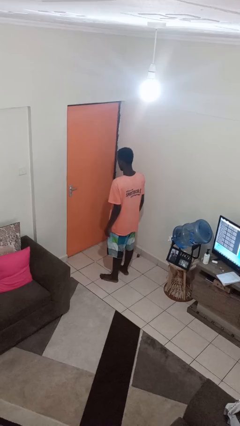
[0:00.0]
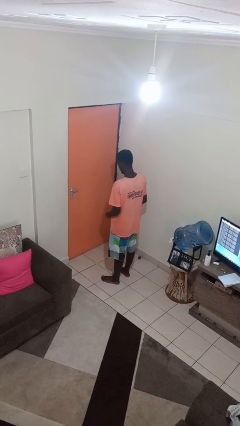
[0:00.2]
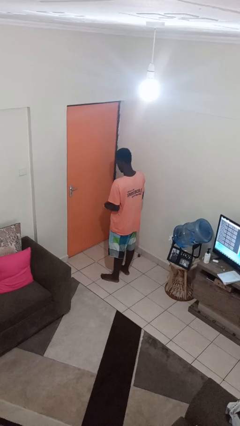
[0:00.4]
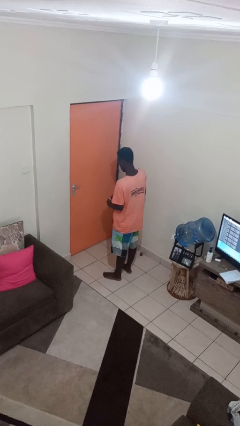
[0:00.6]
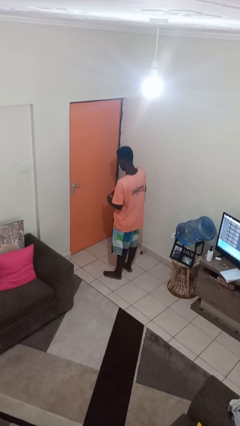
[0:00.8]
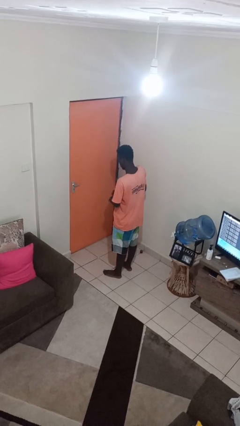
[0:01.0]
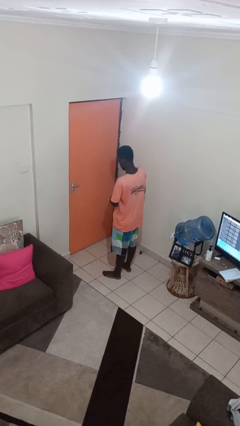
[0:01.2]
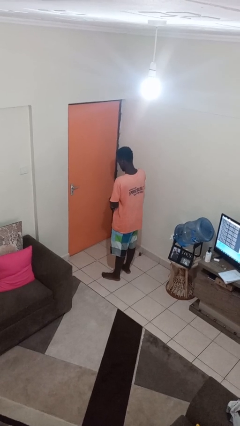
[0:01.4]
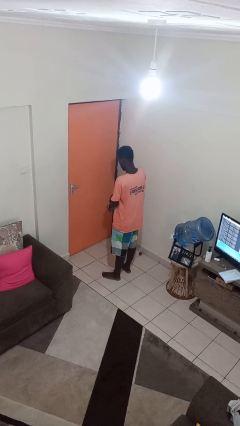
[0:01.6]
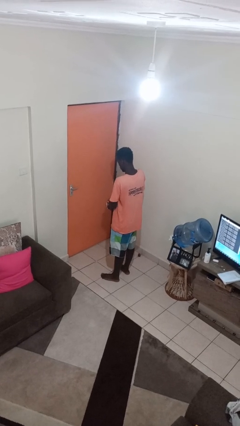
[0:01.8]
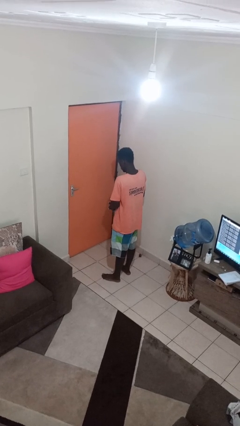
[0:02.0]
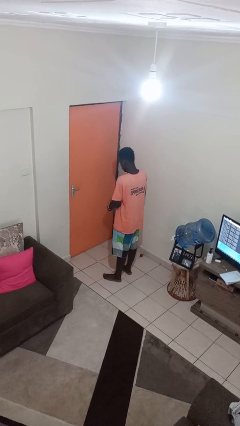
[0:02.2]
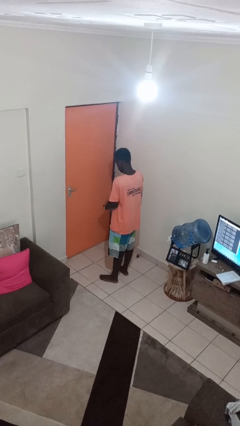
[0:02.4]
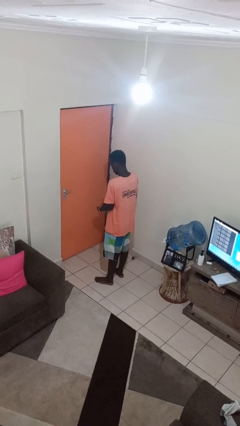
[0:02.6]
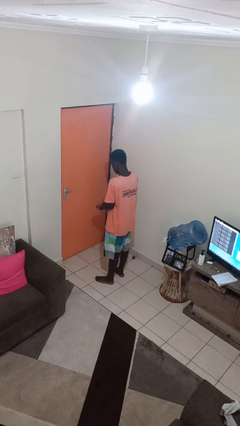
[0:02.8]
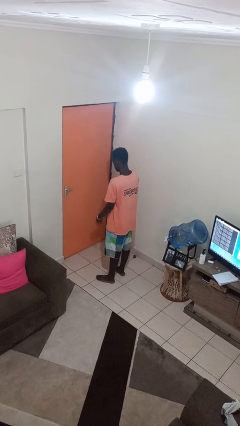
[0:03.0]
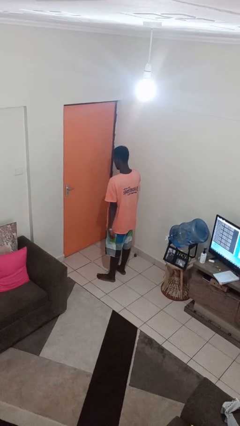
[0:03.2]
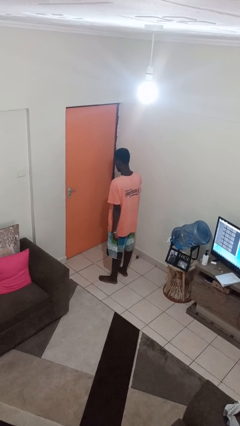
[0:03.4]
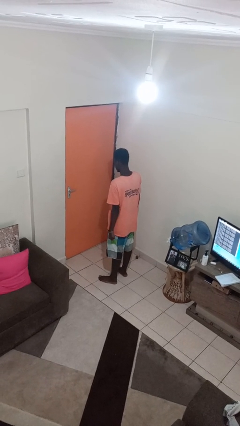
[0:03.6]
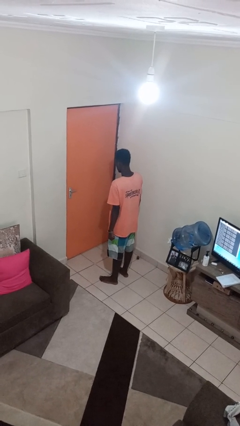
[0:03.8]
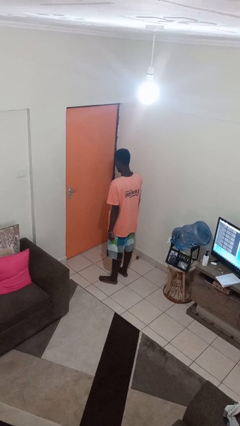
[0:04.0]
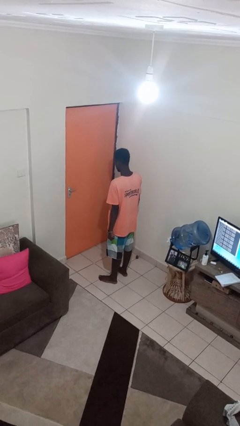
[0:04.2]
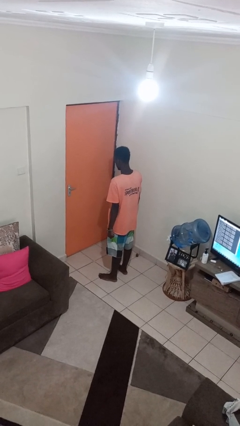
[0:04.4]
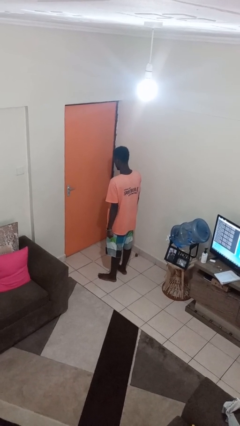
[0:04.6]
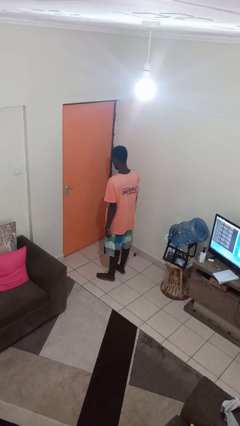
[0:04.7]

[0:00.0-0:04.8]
person puts on wristwatch

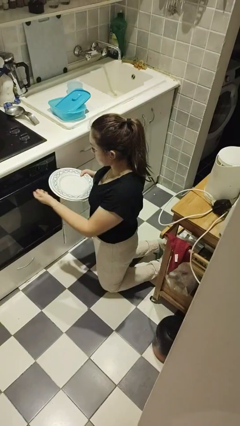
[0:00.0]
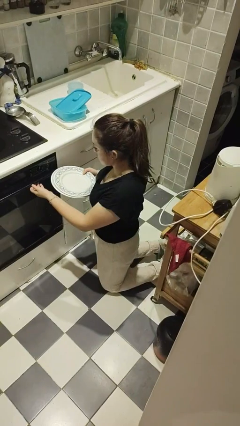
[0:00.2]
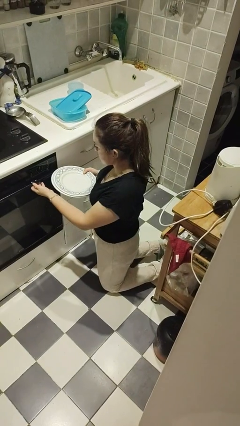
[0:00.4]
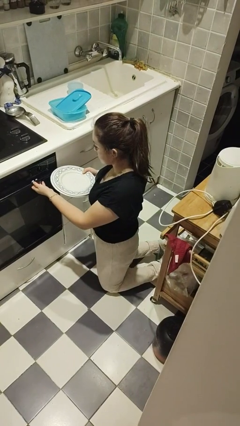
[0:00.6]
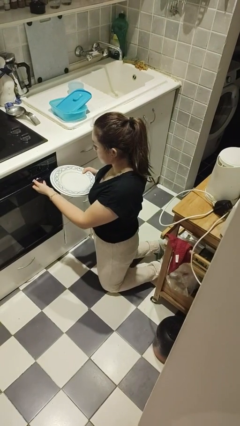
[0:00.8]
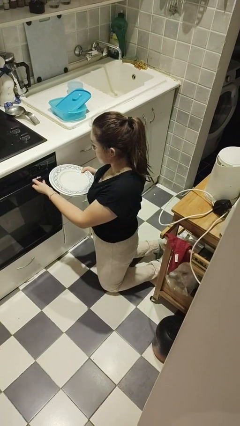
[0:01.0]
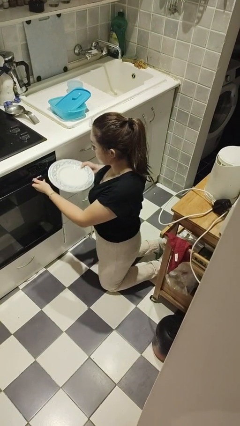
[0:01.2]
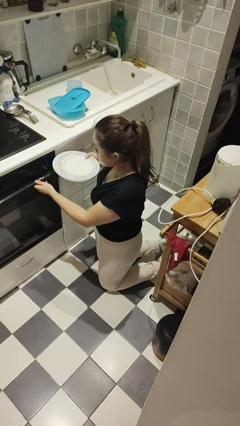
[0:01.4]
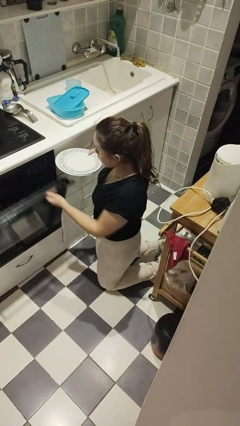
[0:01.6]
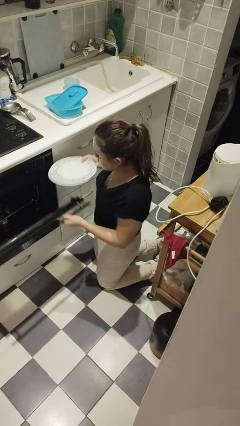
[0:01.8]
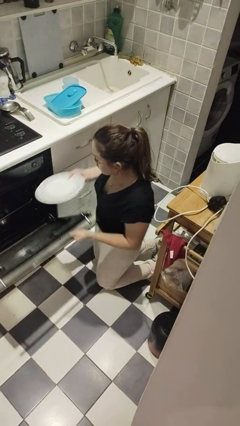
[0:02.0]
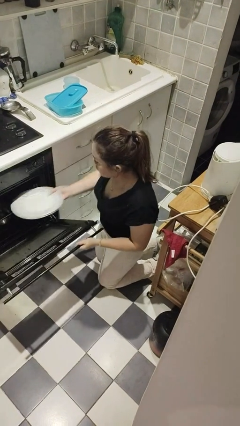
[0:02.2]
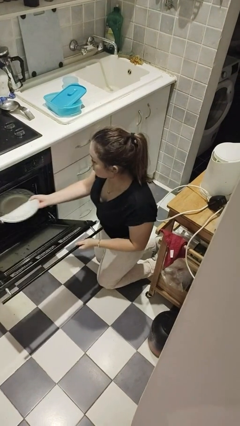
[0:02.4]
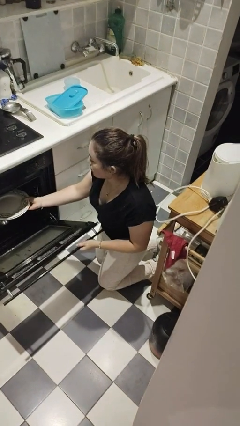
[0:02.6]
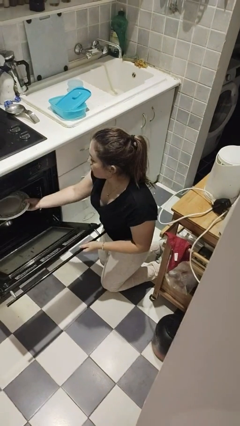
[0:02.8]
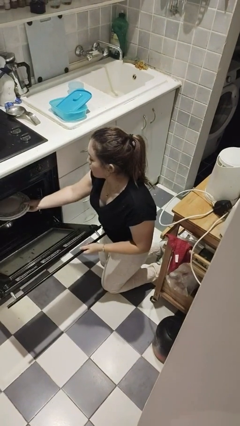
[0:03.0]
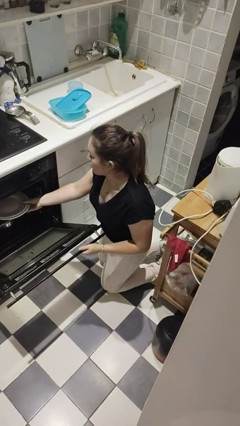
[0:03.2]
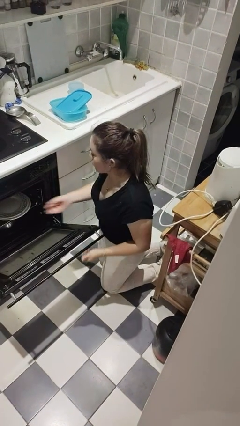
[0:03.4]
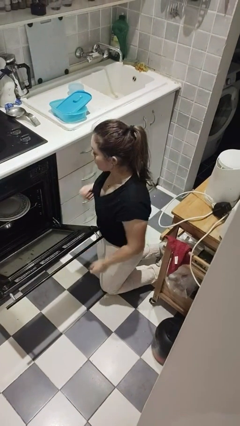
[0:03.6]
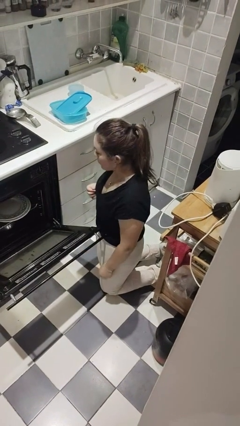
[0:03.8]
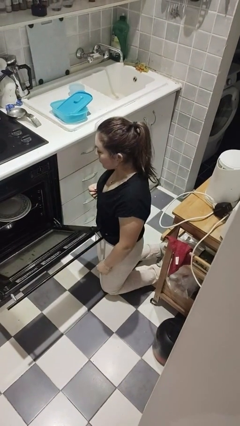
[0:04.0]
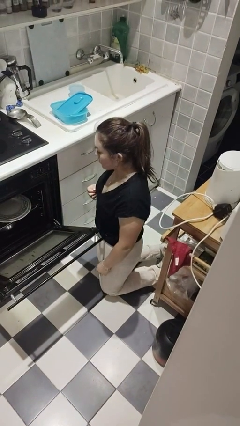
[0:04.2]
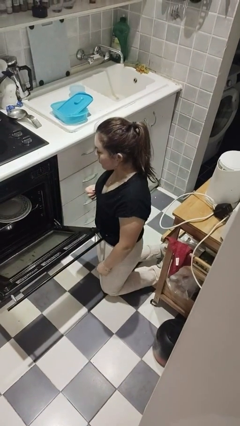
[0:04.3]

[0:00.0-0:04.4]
person loads dishwasher

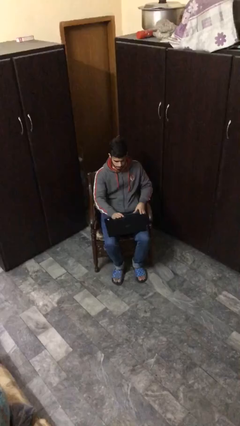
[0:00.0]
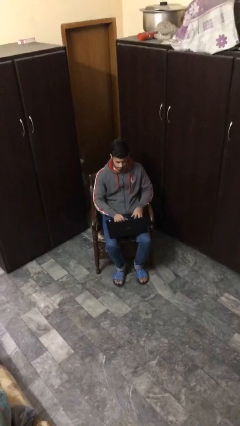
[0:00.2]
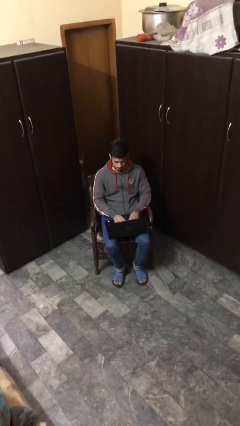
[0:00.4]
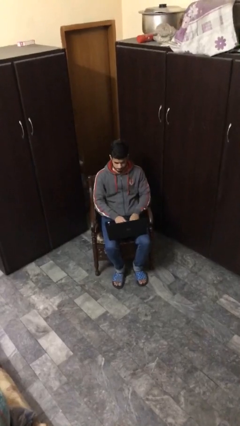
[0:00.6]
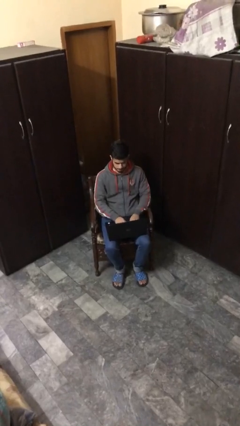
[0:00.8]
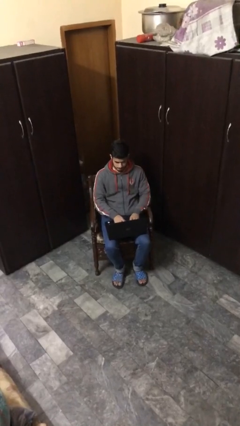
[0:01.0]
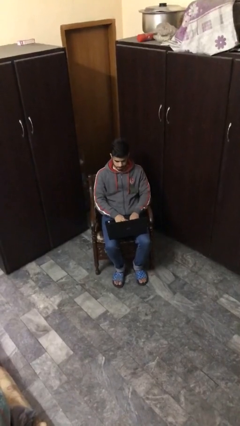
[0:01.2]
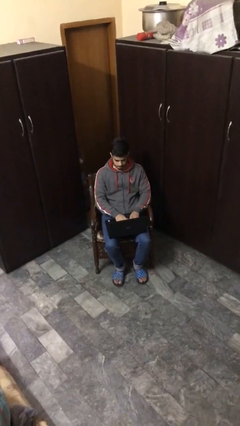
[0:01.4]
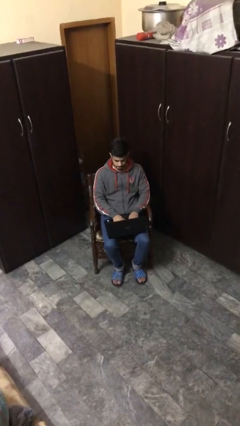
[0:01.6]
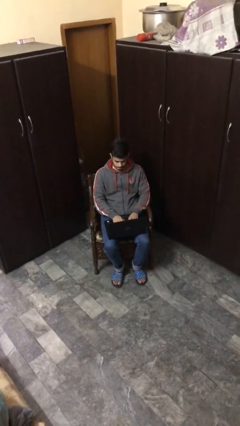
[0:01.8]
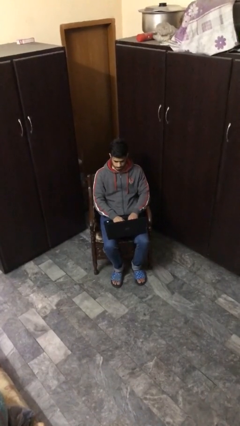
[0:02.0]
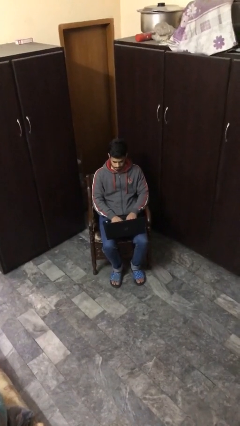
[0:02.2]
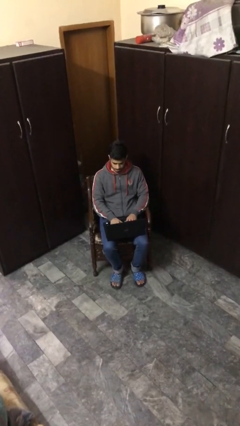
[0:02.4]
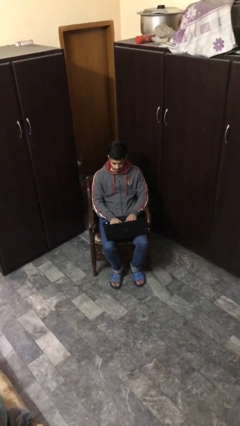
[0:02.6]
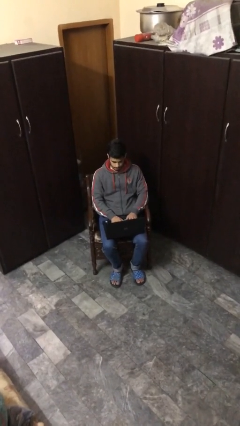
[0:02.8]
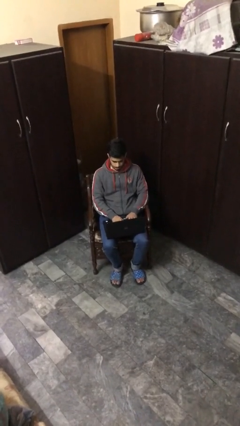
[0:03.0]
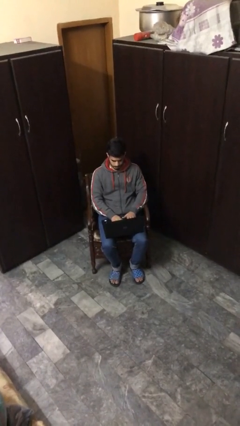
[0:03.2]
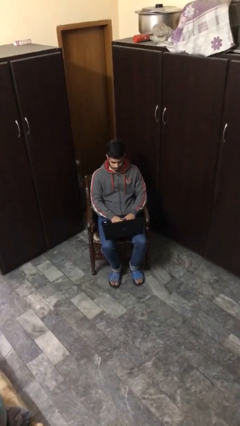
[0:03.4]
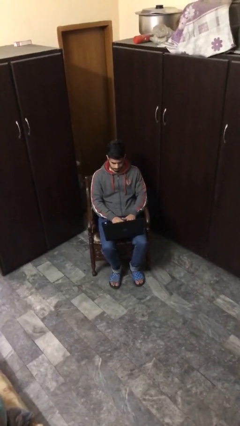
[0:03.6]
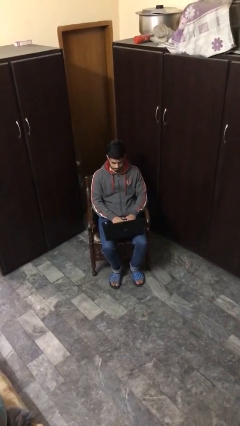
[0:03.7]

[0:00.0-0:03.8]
person interacts with laptop

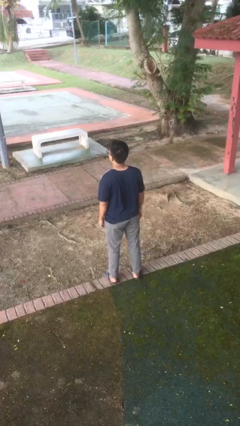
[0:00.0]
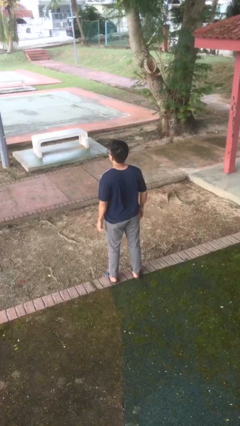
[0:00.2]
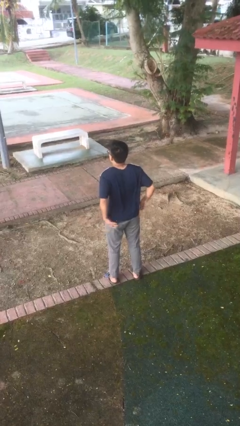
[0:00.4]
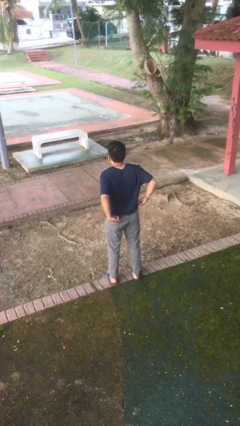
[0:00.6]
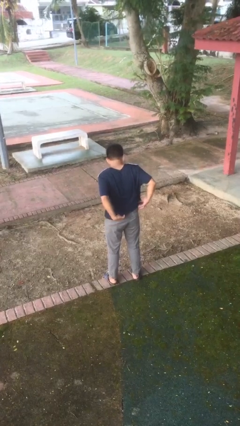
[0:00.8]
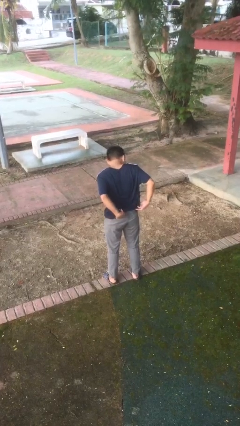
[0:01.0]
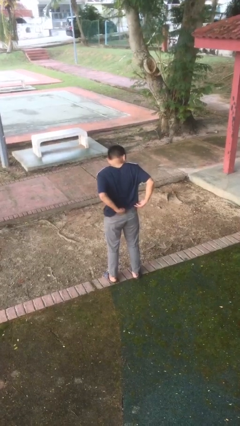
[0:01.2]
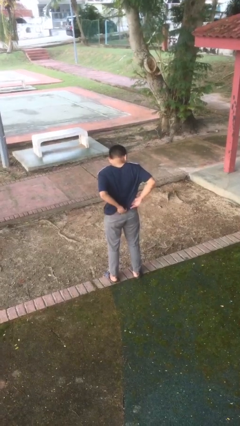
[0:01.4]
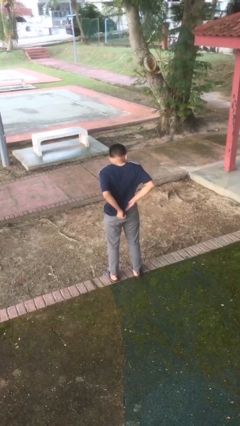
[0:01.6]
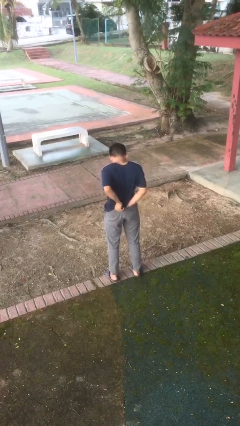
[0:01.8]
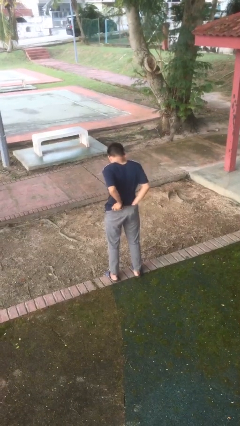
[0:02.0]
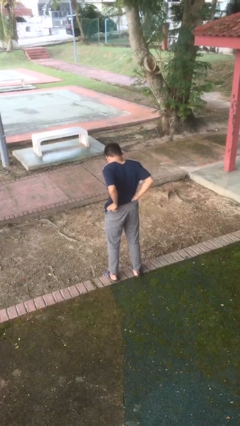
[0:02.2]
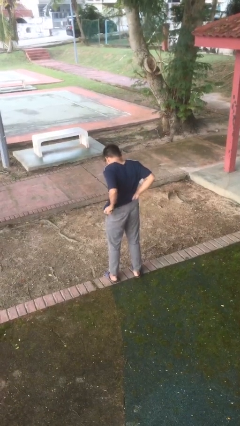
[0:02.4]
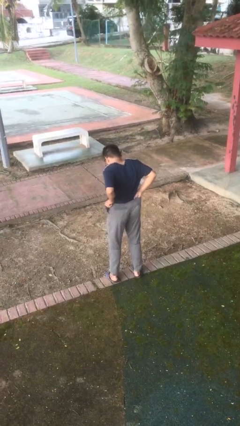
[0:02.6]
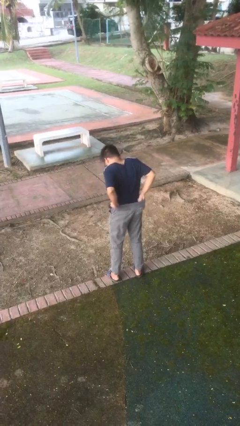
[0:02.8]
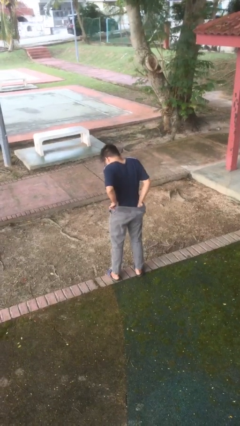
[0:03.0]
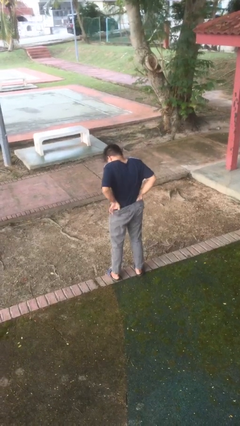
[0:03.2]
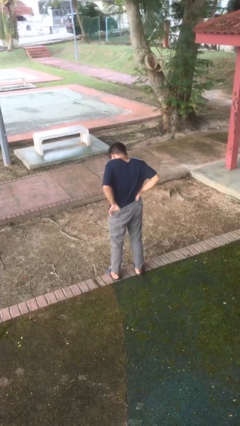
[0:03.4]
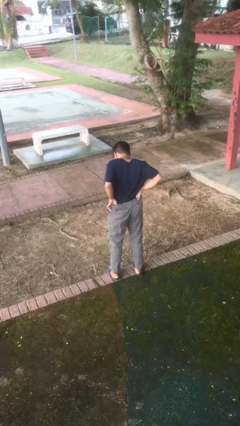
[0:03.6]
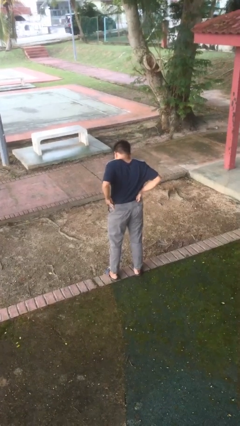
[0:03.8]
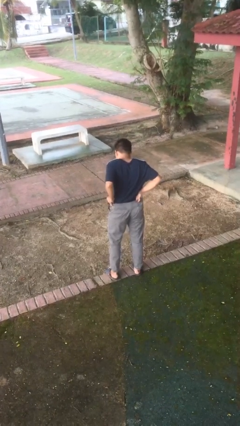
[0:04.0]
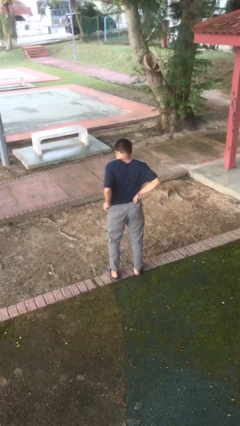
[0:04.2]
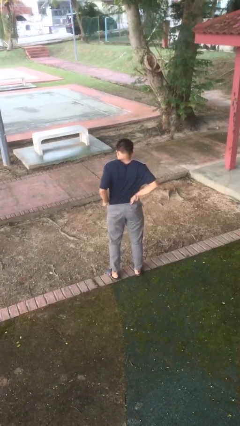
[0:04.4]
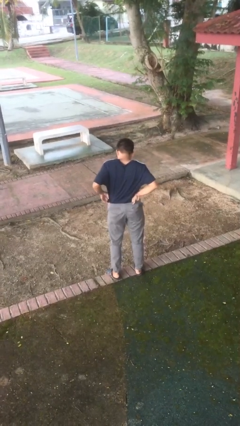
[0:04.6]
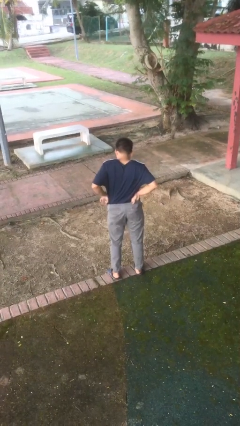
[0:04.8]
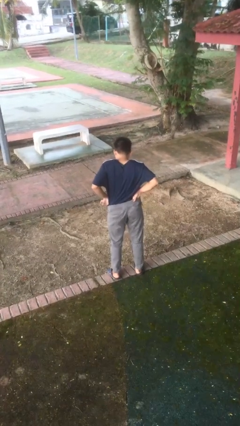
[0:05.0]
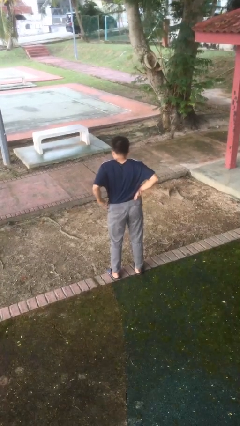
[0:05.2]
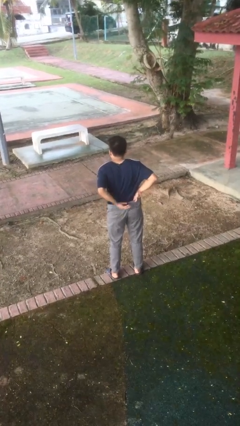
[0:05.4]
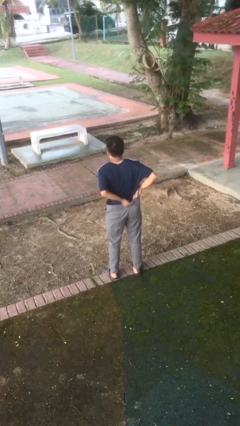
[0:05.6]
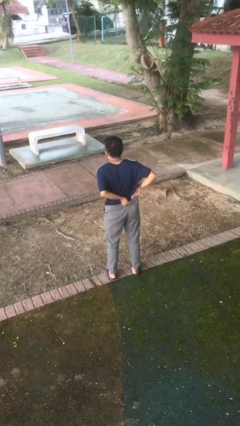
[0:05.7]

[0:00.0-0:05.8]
person tucks in shirt
